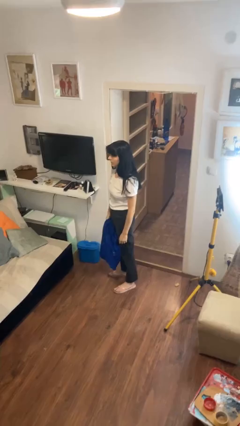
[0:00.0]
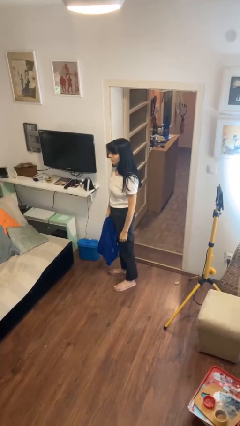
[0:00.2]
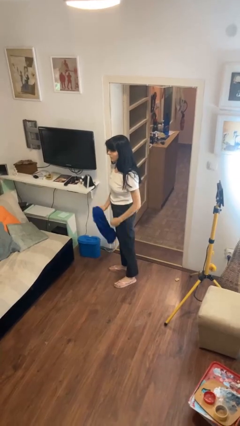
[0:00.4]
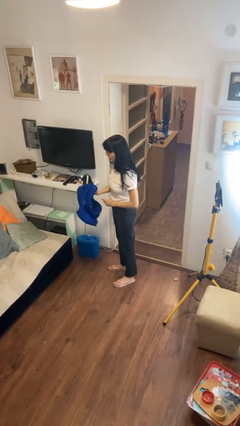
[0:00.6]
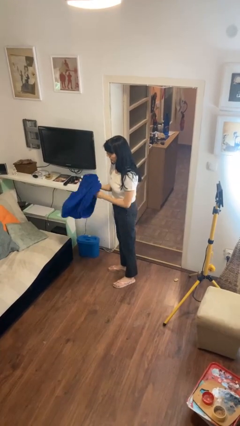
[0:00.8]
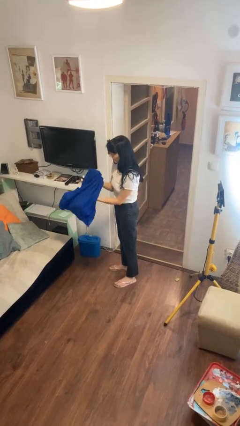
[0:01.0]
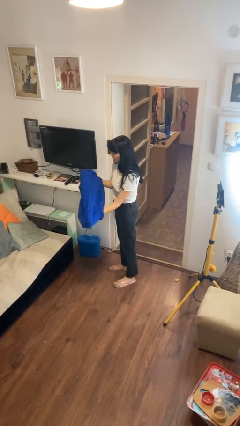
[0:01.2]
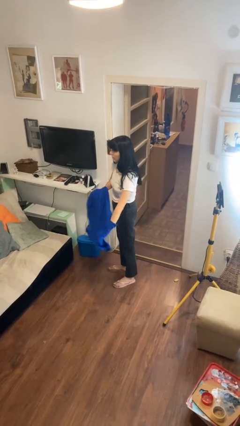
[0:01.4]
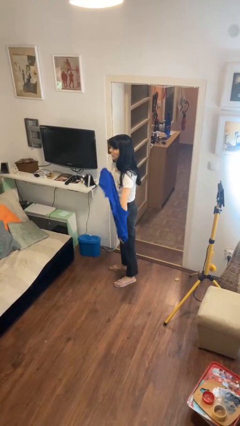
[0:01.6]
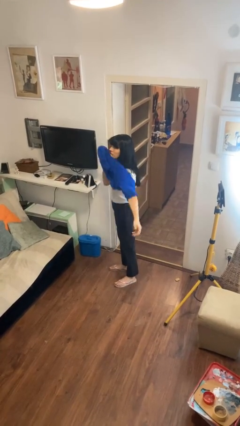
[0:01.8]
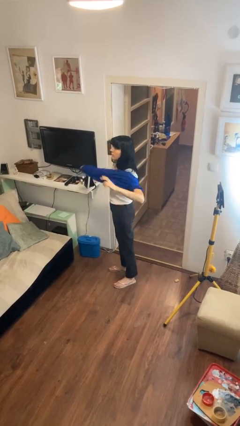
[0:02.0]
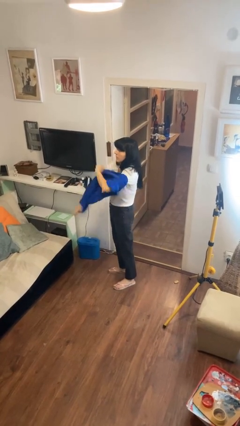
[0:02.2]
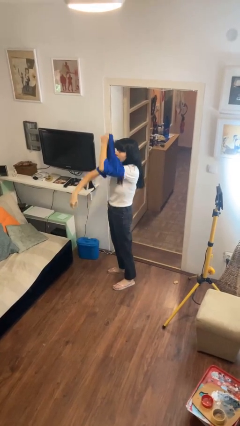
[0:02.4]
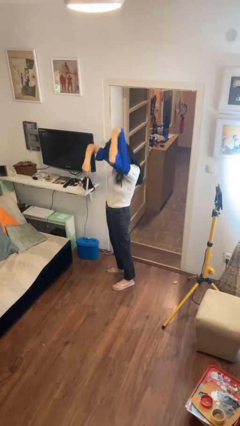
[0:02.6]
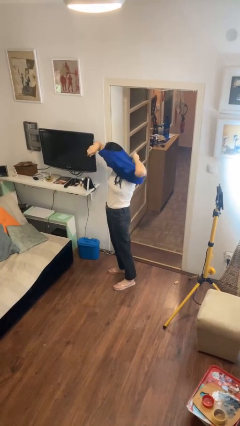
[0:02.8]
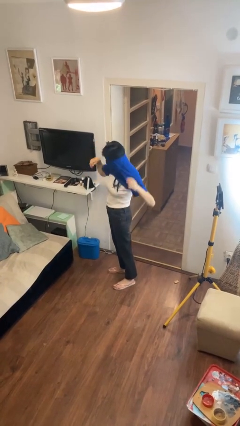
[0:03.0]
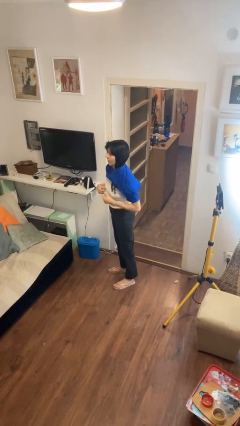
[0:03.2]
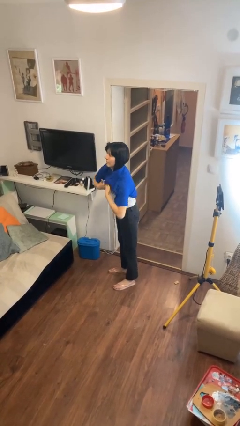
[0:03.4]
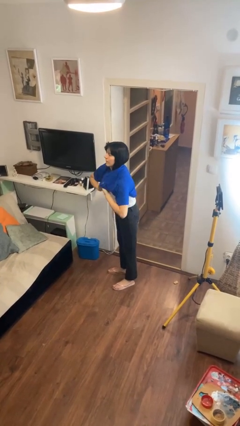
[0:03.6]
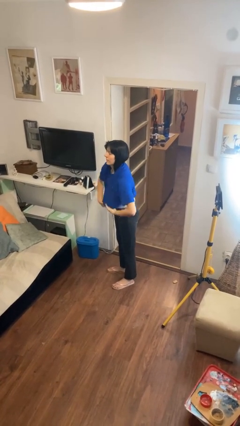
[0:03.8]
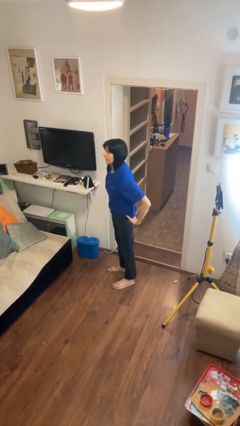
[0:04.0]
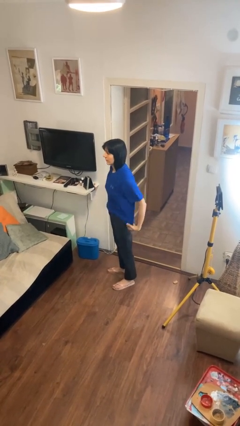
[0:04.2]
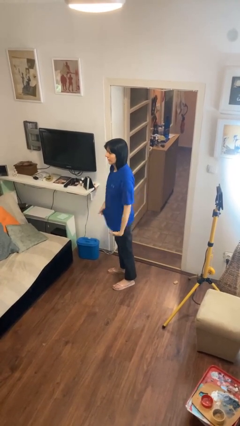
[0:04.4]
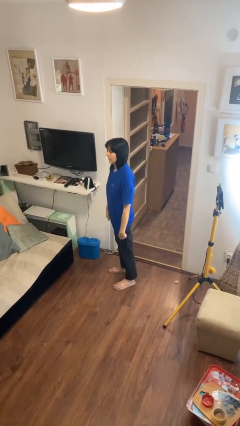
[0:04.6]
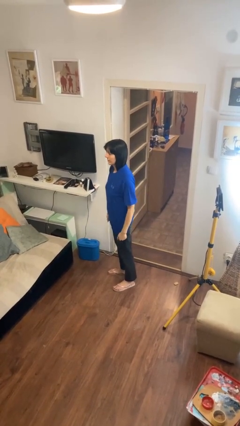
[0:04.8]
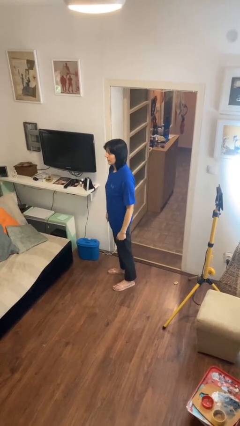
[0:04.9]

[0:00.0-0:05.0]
person puts on shirt

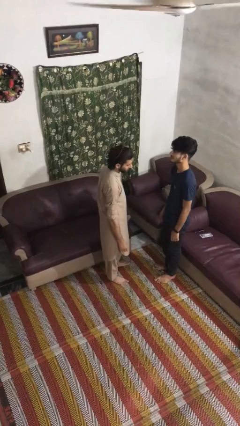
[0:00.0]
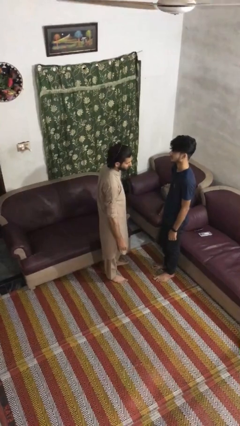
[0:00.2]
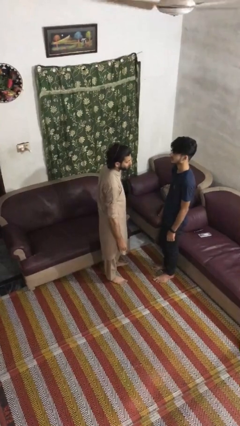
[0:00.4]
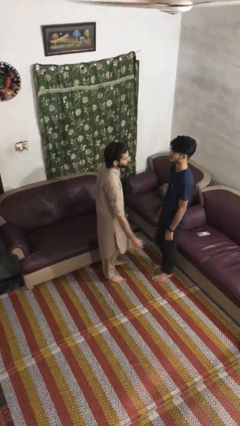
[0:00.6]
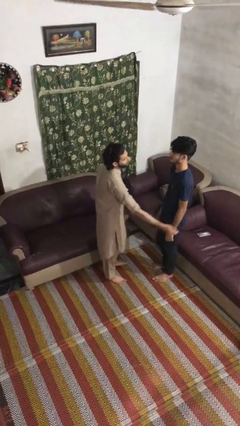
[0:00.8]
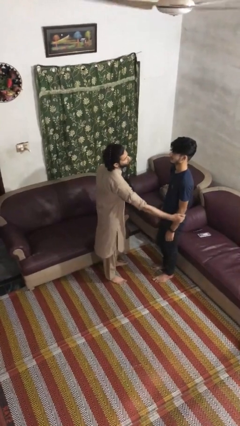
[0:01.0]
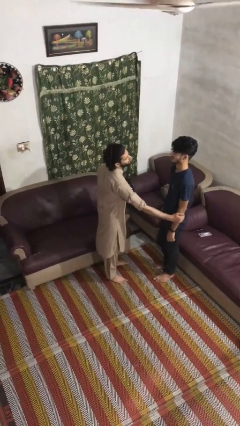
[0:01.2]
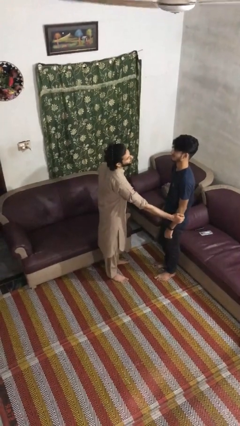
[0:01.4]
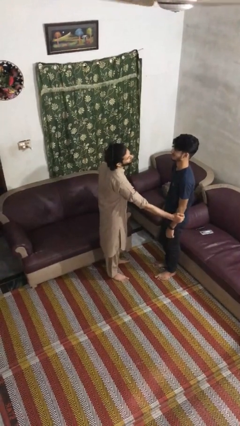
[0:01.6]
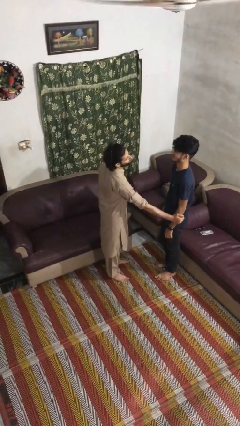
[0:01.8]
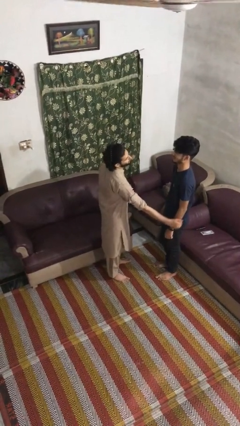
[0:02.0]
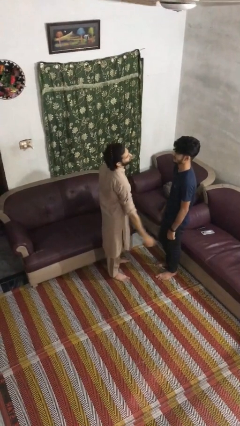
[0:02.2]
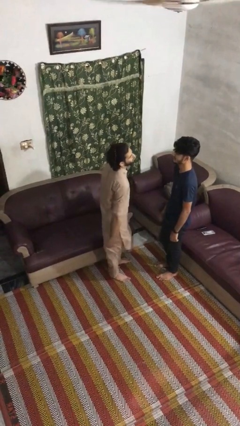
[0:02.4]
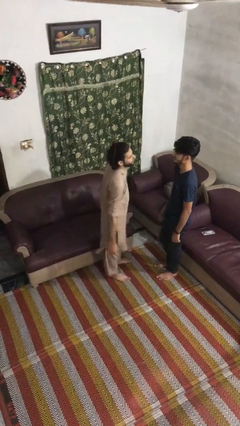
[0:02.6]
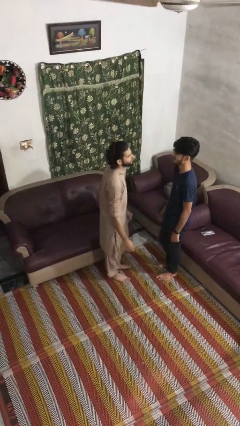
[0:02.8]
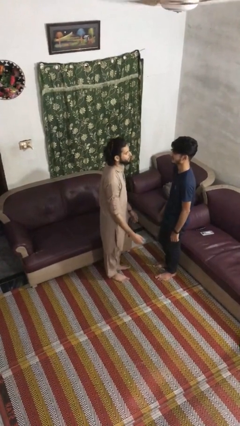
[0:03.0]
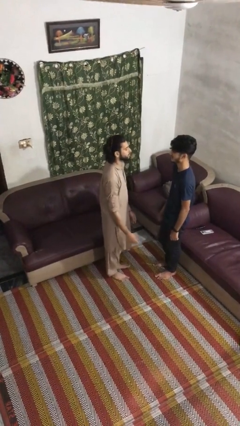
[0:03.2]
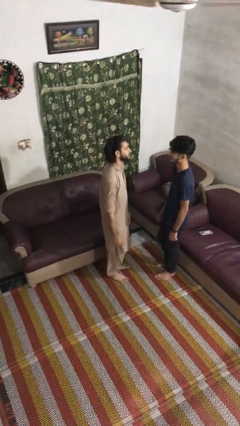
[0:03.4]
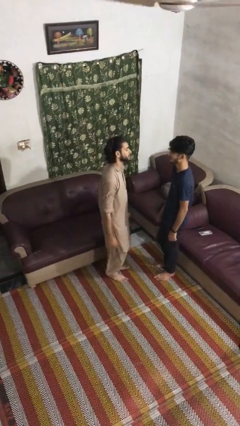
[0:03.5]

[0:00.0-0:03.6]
person grabs person by forearm

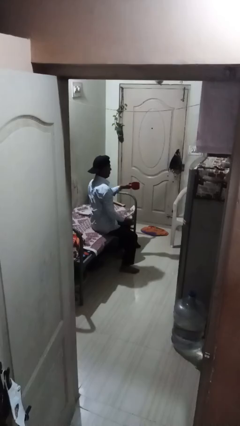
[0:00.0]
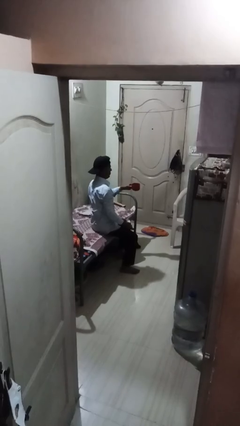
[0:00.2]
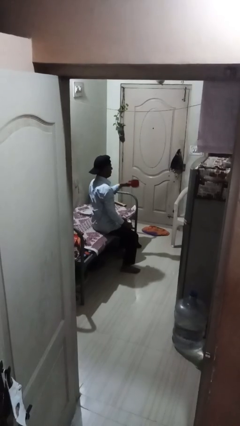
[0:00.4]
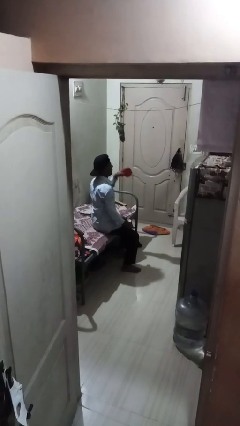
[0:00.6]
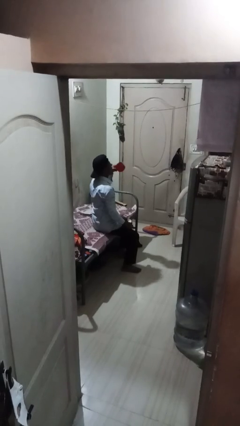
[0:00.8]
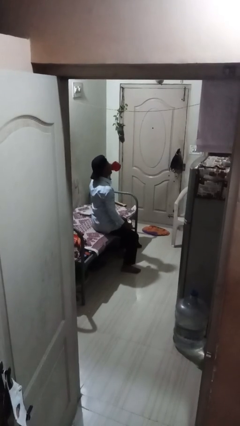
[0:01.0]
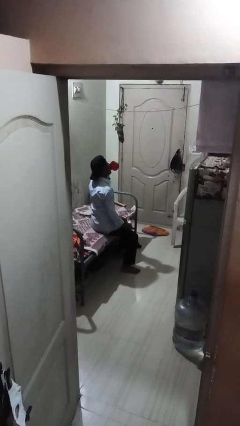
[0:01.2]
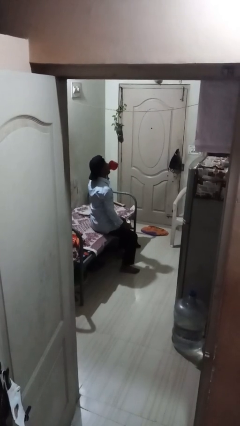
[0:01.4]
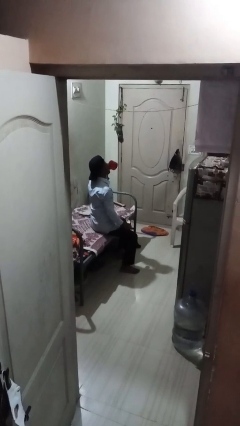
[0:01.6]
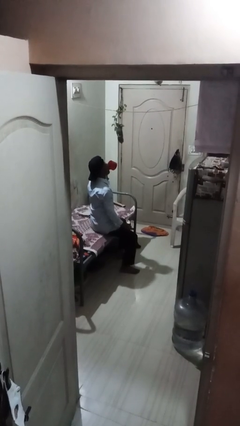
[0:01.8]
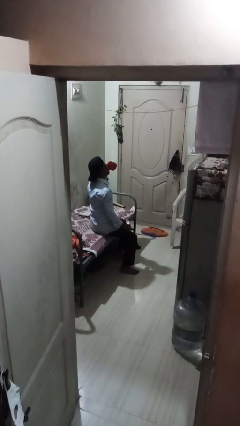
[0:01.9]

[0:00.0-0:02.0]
person drinks from mug

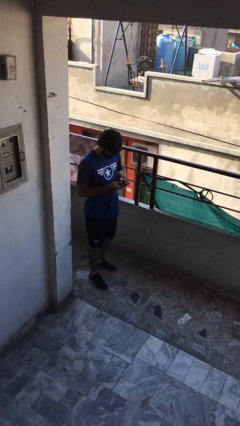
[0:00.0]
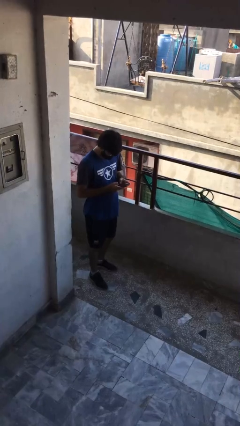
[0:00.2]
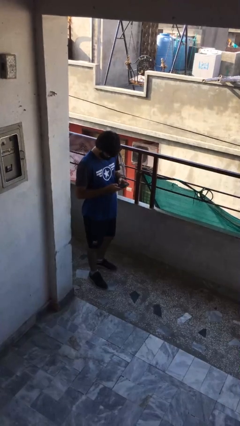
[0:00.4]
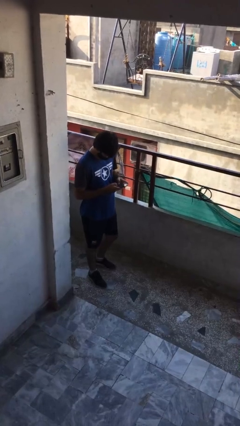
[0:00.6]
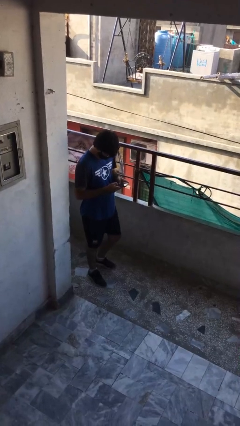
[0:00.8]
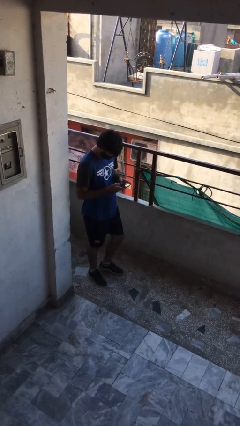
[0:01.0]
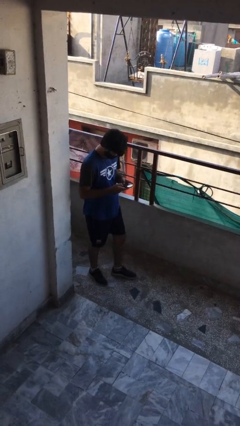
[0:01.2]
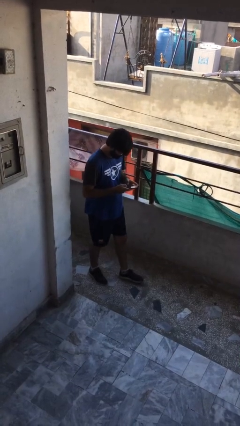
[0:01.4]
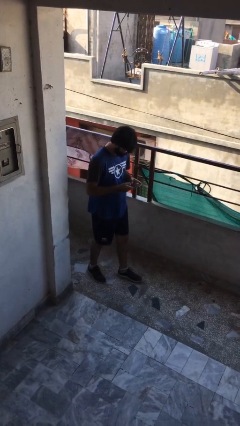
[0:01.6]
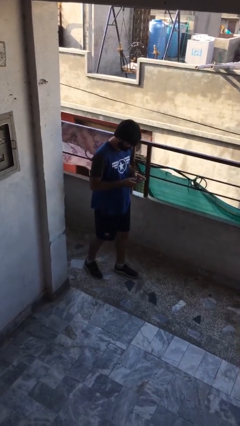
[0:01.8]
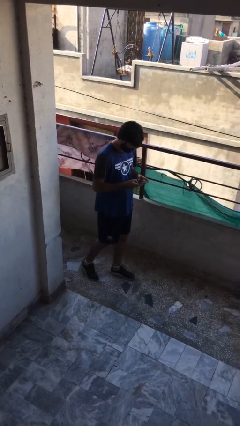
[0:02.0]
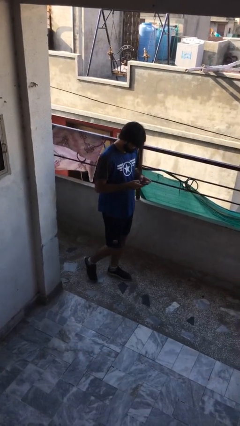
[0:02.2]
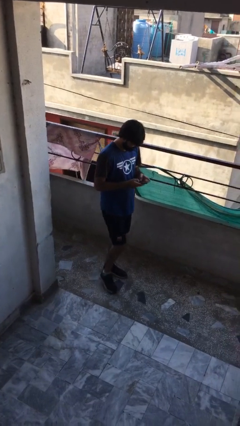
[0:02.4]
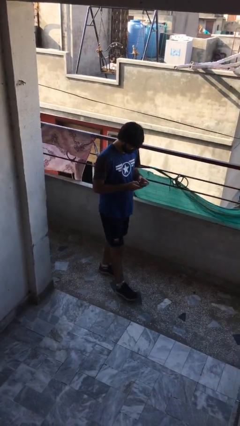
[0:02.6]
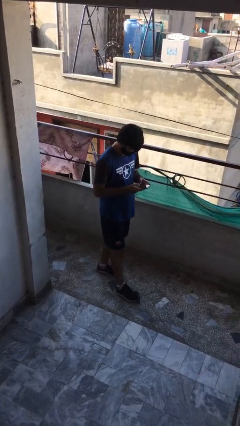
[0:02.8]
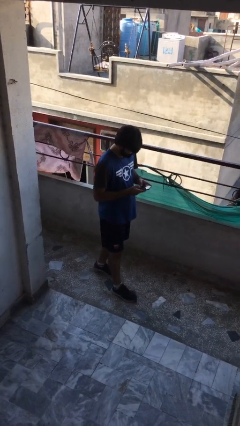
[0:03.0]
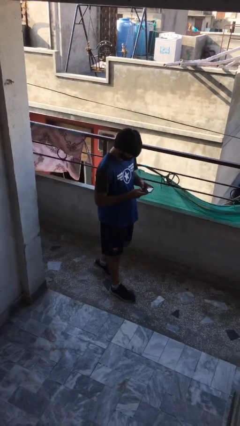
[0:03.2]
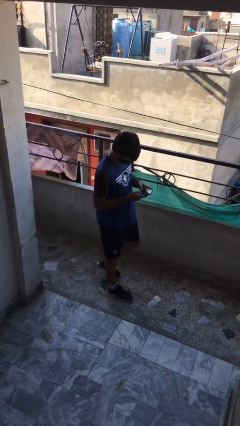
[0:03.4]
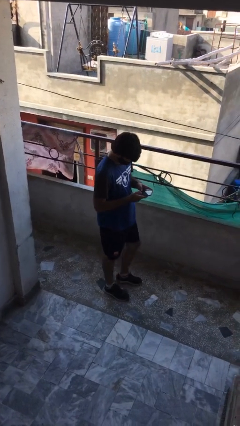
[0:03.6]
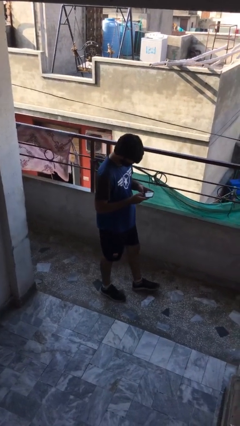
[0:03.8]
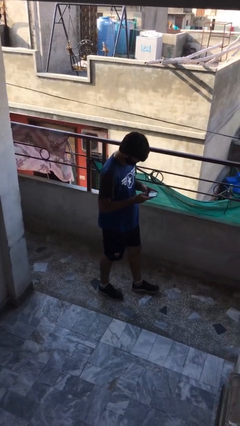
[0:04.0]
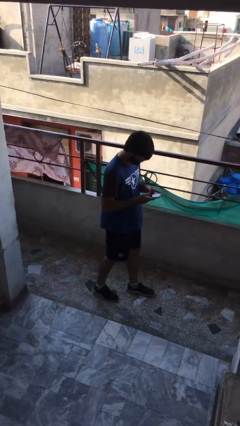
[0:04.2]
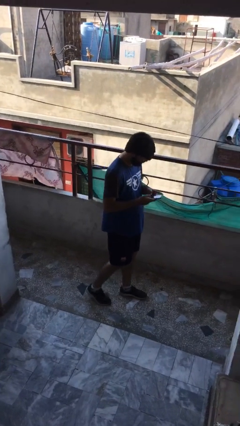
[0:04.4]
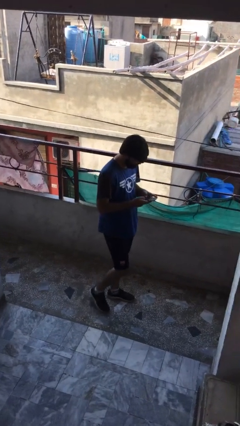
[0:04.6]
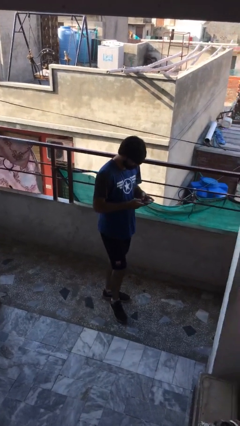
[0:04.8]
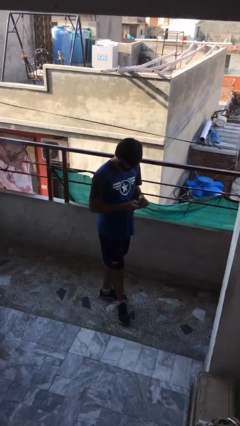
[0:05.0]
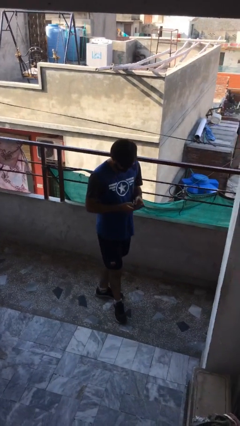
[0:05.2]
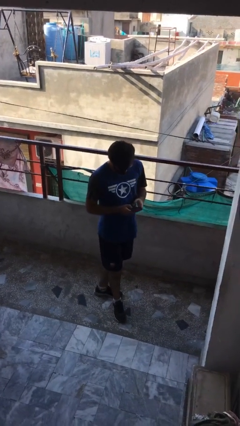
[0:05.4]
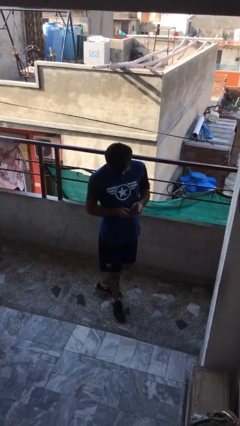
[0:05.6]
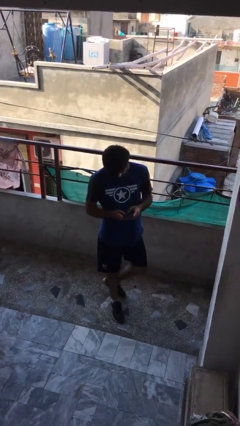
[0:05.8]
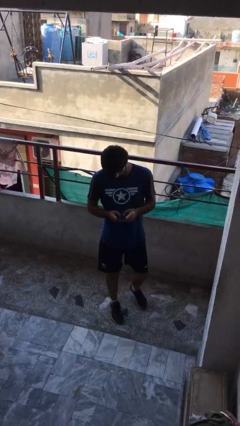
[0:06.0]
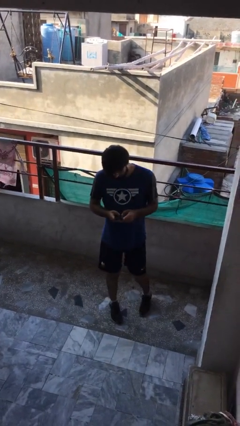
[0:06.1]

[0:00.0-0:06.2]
person texts on phone

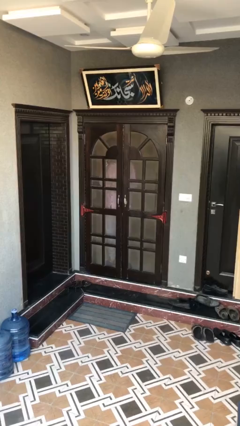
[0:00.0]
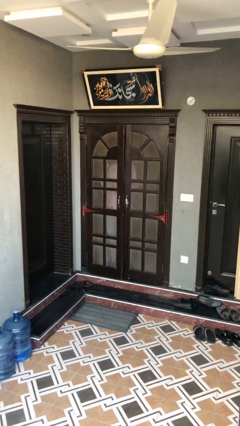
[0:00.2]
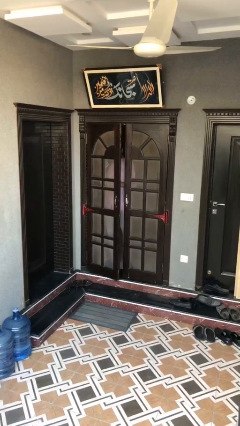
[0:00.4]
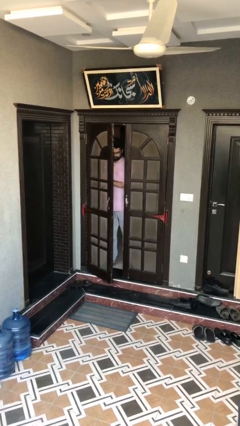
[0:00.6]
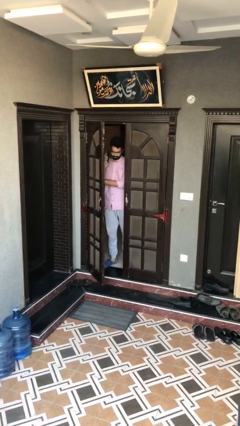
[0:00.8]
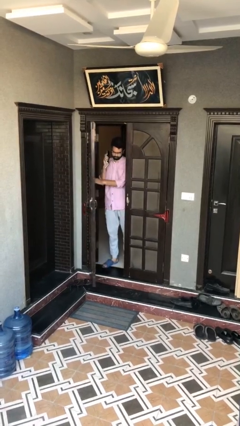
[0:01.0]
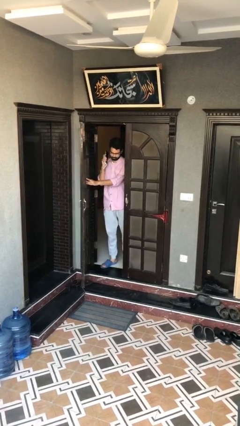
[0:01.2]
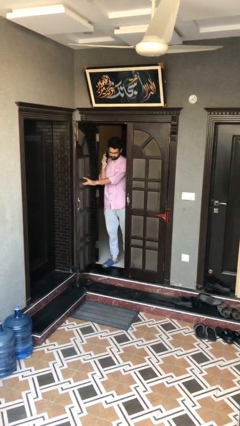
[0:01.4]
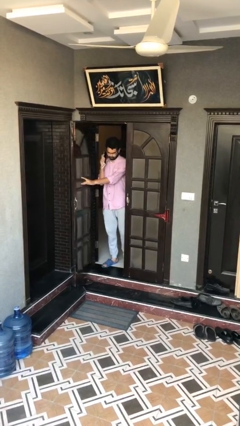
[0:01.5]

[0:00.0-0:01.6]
person opens facility door
